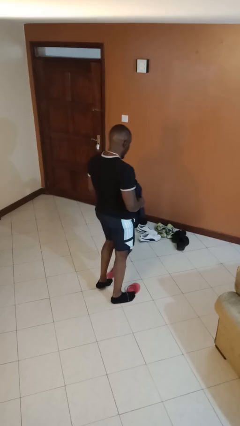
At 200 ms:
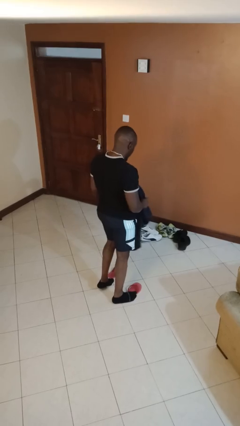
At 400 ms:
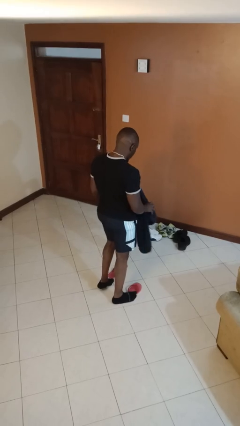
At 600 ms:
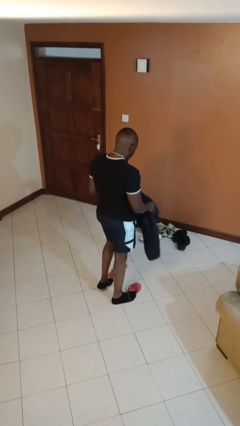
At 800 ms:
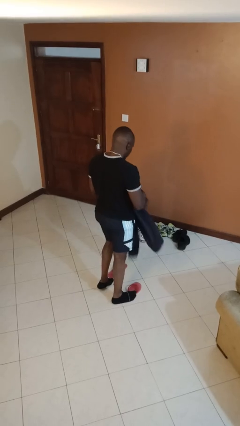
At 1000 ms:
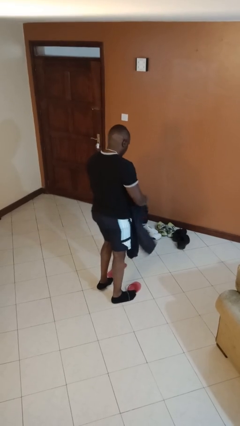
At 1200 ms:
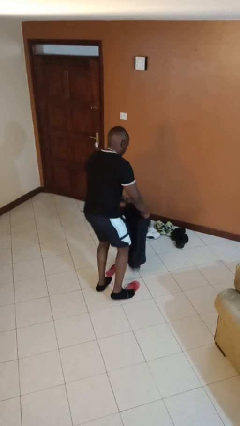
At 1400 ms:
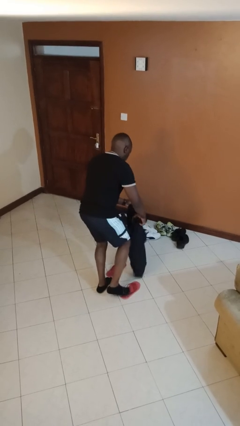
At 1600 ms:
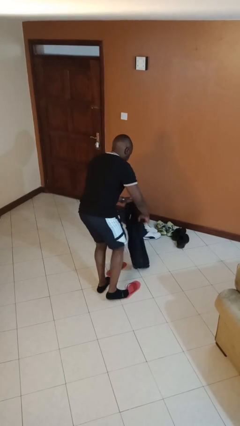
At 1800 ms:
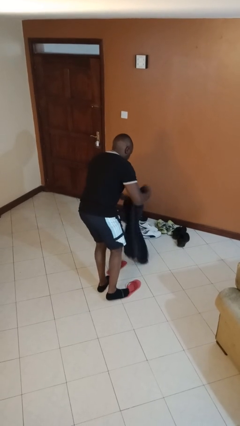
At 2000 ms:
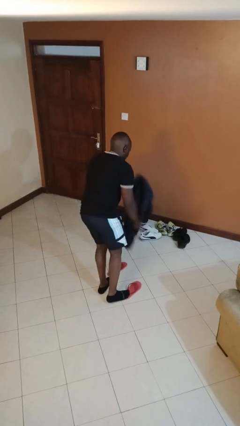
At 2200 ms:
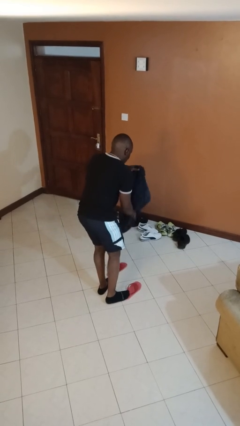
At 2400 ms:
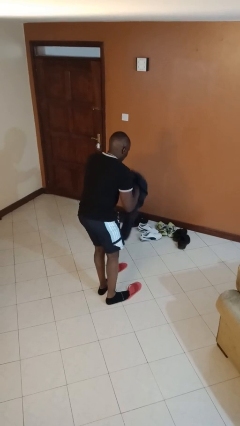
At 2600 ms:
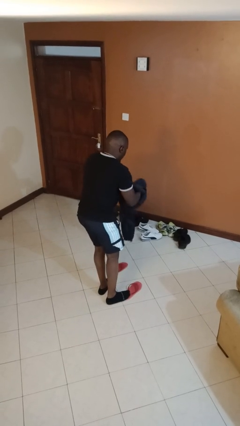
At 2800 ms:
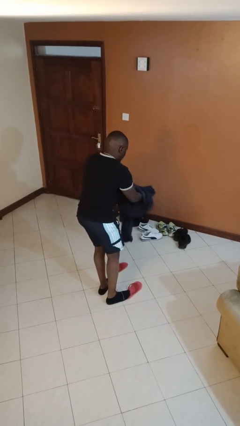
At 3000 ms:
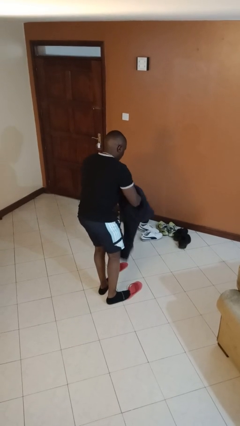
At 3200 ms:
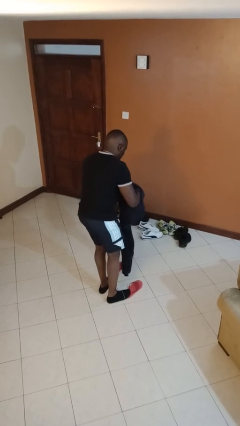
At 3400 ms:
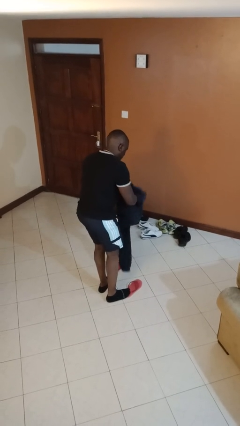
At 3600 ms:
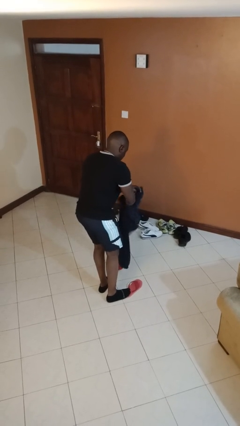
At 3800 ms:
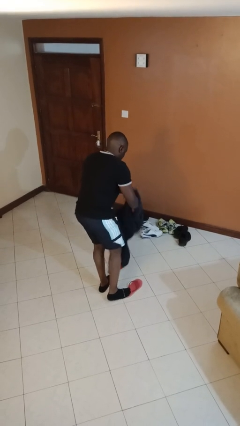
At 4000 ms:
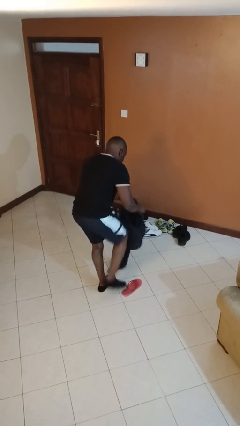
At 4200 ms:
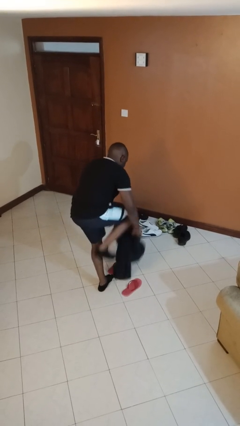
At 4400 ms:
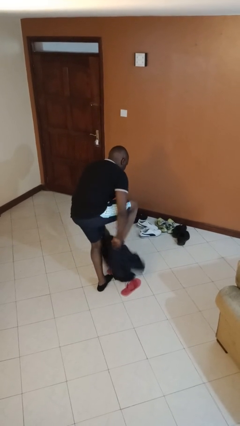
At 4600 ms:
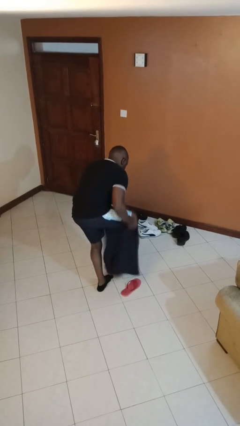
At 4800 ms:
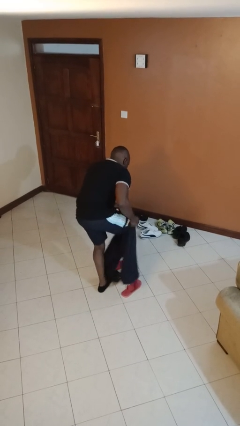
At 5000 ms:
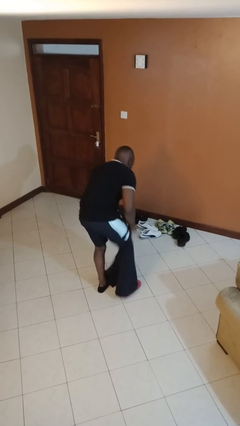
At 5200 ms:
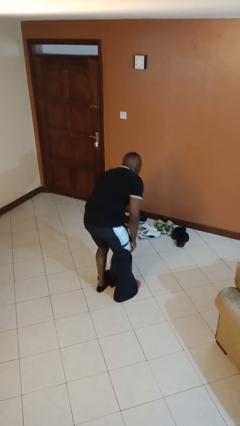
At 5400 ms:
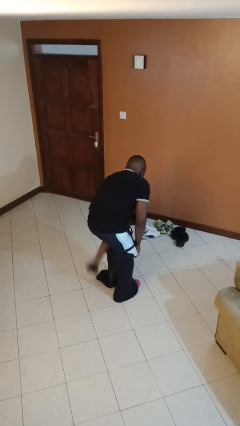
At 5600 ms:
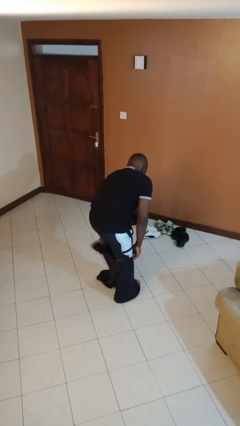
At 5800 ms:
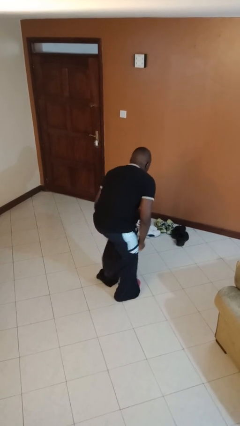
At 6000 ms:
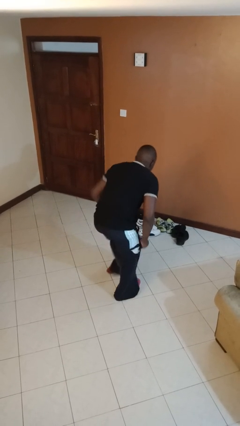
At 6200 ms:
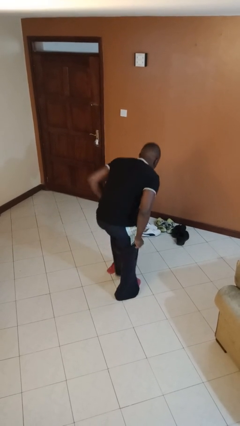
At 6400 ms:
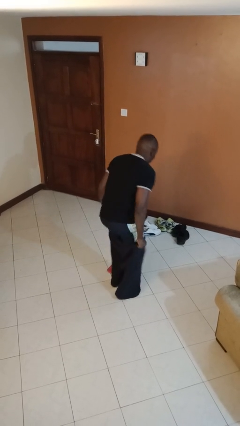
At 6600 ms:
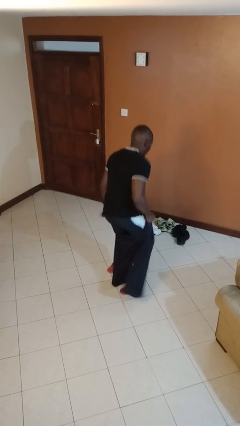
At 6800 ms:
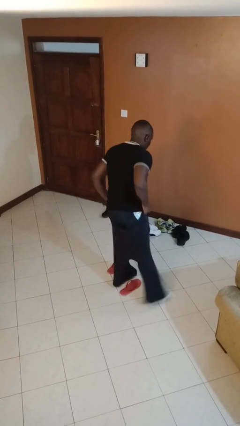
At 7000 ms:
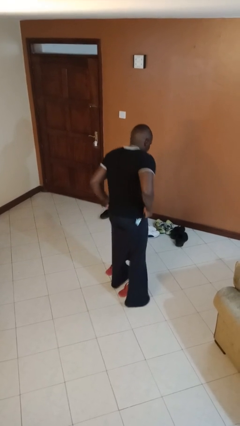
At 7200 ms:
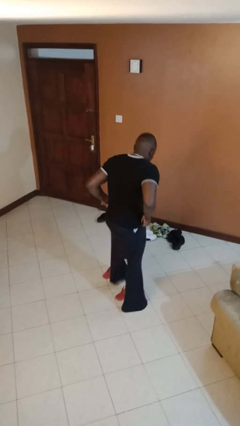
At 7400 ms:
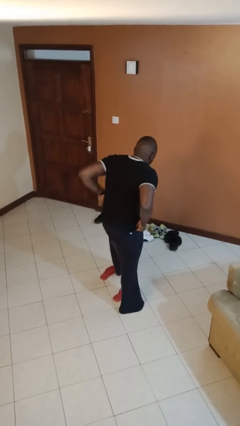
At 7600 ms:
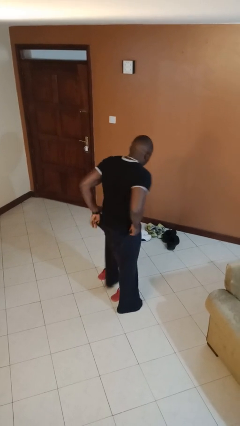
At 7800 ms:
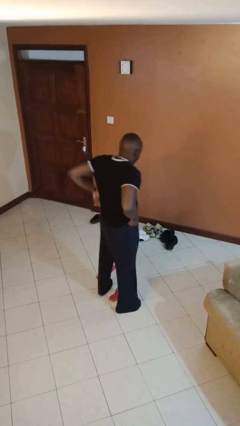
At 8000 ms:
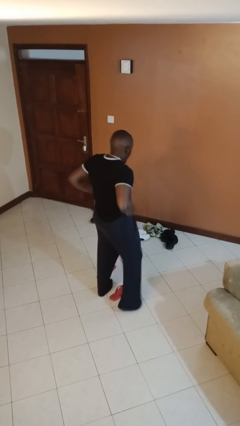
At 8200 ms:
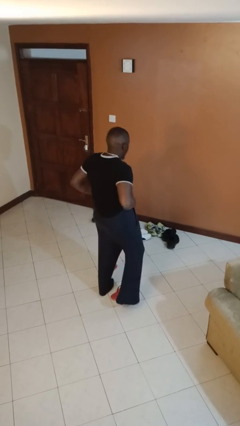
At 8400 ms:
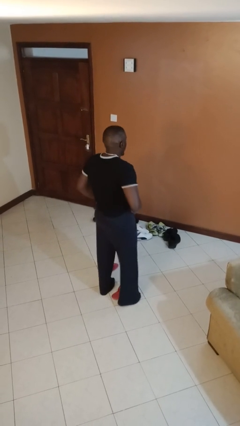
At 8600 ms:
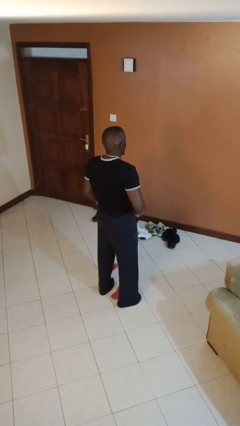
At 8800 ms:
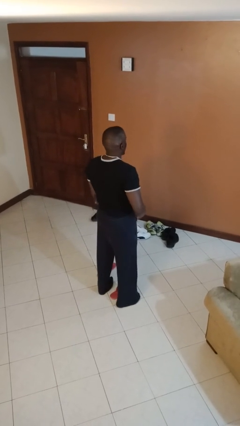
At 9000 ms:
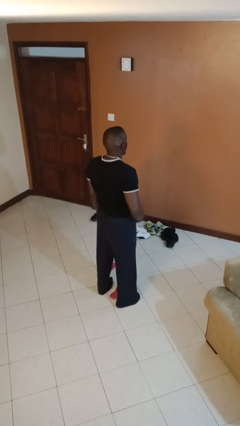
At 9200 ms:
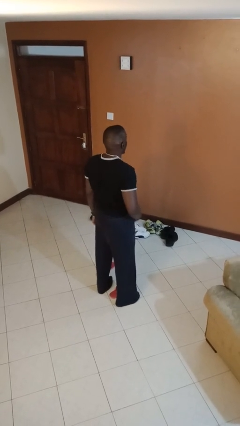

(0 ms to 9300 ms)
person puts on pants

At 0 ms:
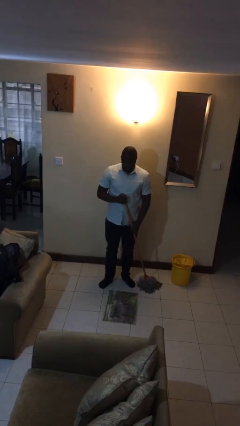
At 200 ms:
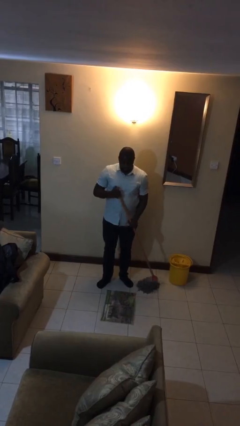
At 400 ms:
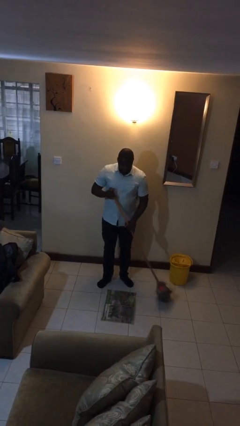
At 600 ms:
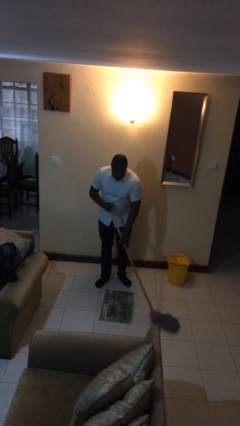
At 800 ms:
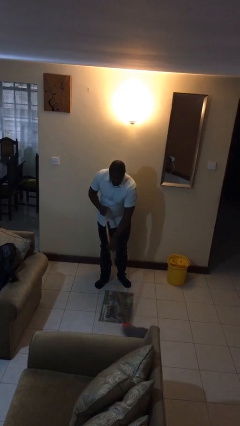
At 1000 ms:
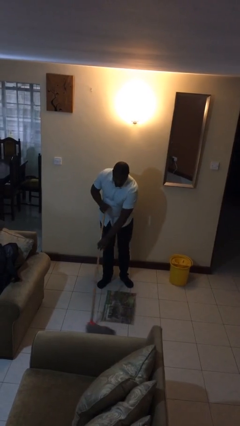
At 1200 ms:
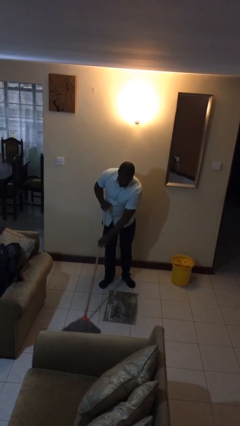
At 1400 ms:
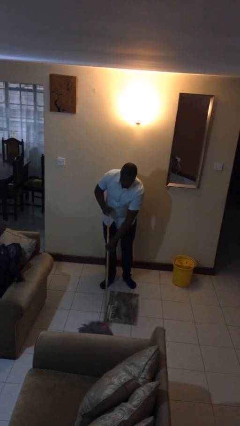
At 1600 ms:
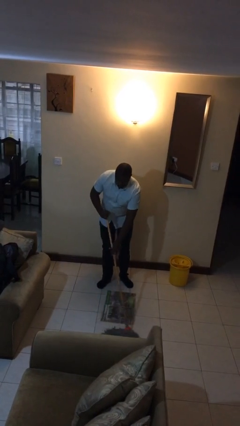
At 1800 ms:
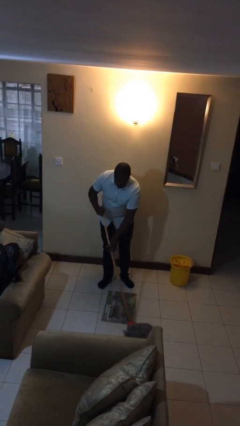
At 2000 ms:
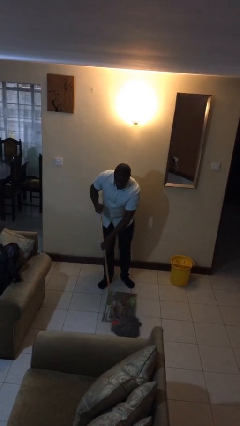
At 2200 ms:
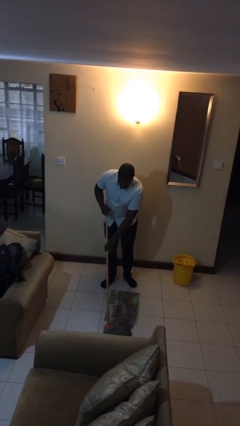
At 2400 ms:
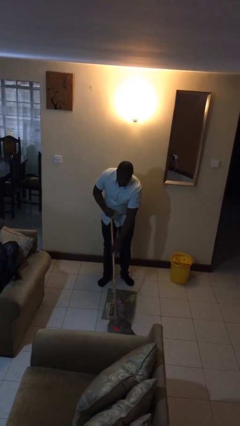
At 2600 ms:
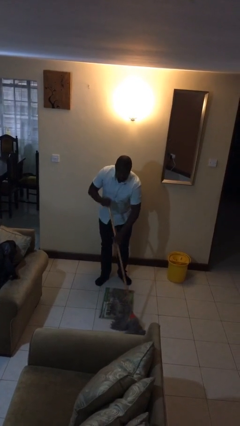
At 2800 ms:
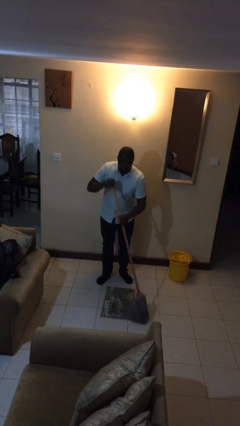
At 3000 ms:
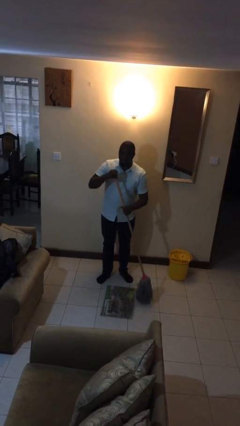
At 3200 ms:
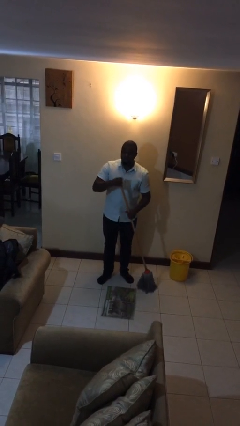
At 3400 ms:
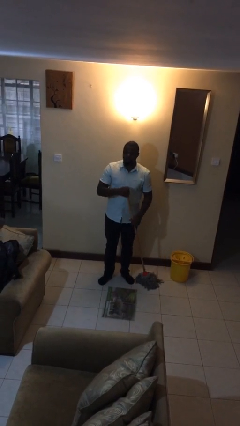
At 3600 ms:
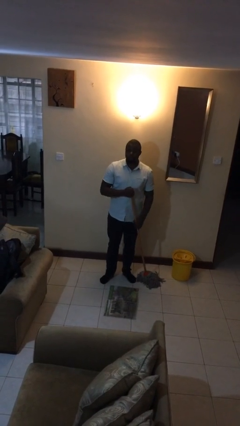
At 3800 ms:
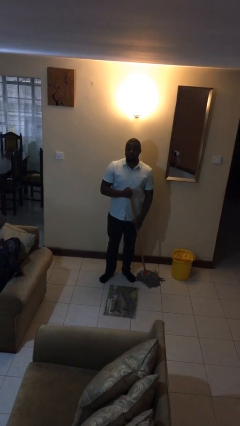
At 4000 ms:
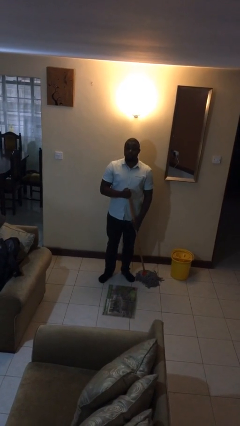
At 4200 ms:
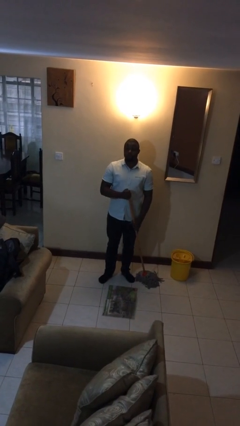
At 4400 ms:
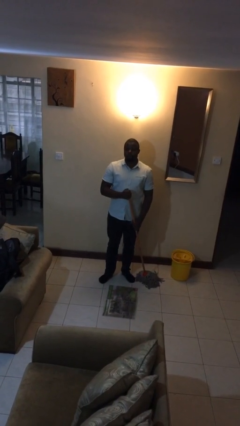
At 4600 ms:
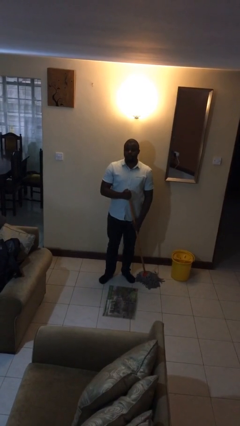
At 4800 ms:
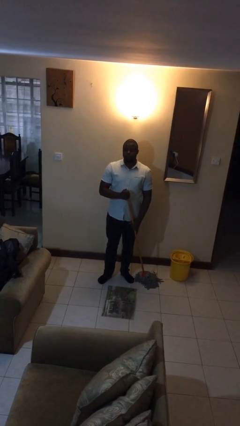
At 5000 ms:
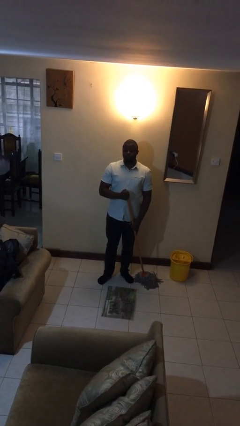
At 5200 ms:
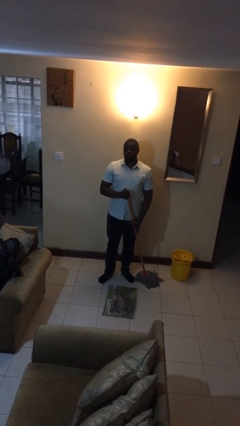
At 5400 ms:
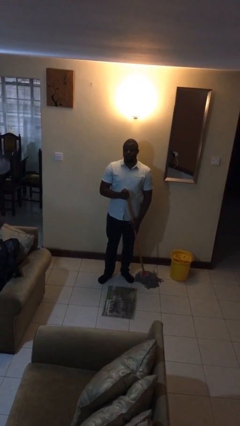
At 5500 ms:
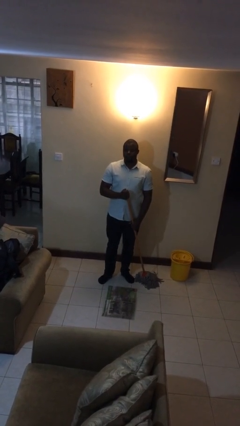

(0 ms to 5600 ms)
person mops

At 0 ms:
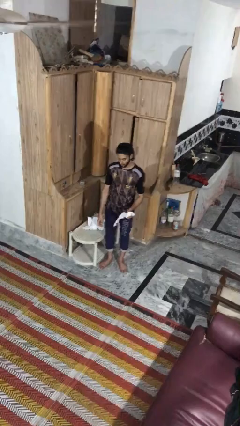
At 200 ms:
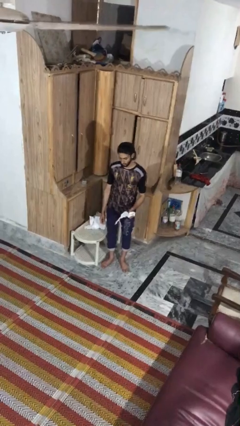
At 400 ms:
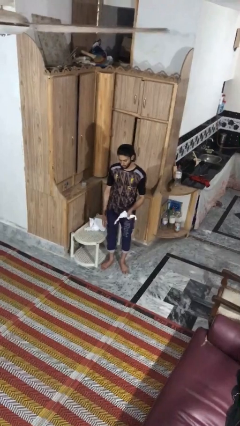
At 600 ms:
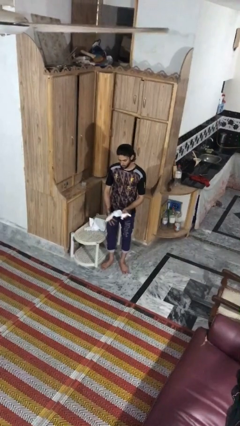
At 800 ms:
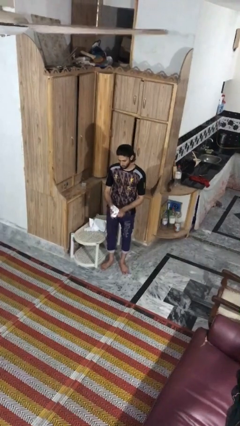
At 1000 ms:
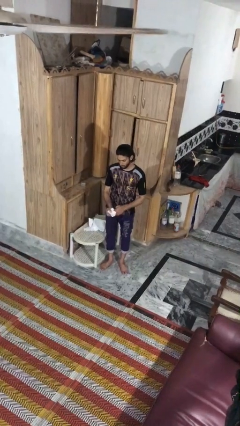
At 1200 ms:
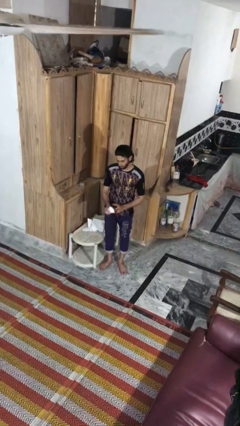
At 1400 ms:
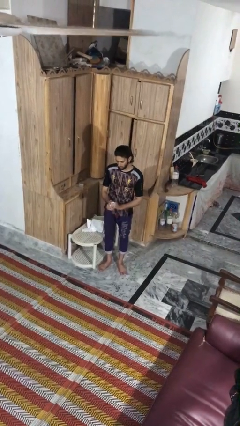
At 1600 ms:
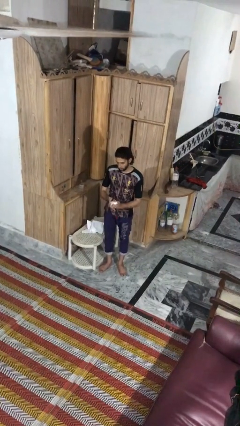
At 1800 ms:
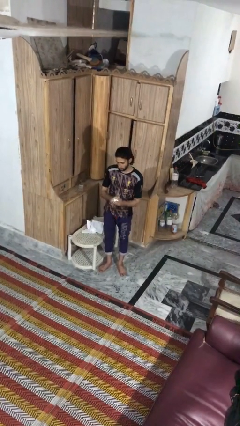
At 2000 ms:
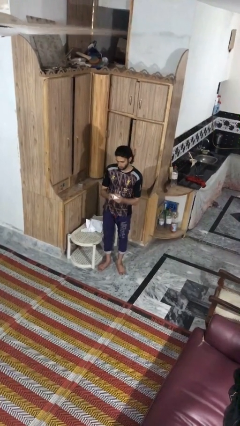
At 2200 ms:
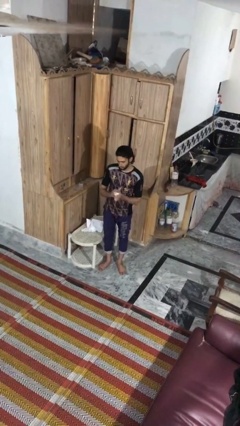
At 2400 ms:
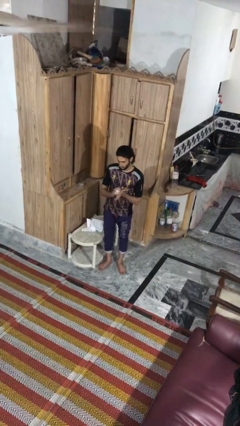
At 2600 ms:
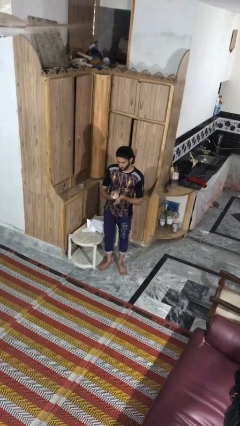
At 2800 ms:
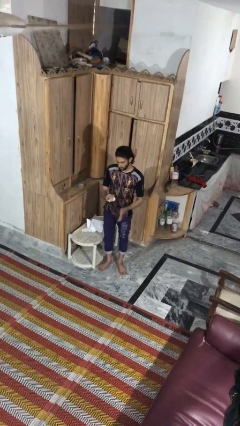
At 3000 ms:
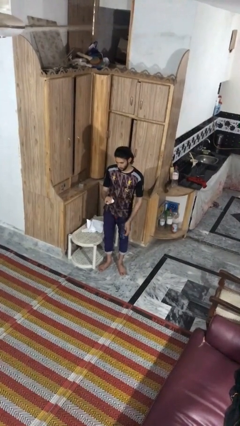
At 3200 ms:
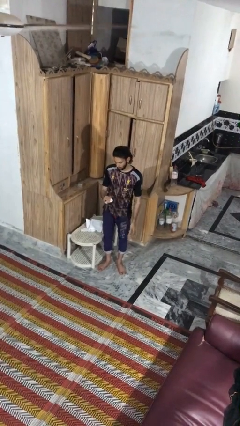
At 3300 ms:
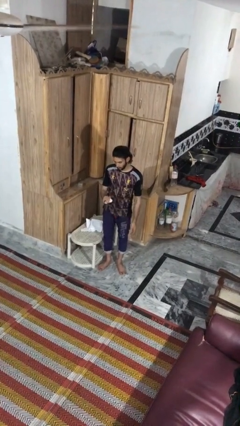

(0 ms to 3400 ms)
person crumples paper
